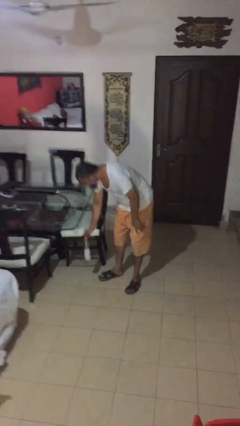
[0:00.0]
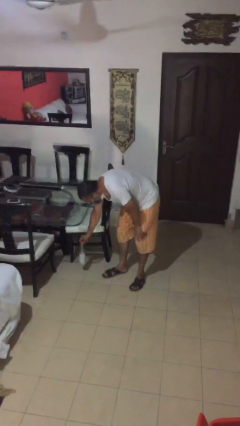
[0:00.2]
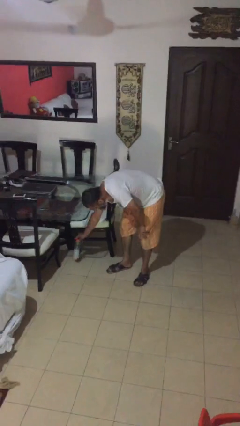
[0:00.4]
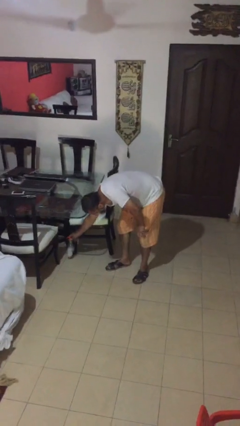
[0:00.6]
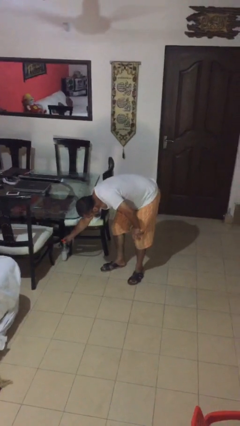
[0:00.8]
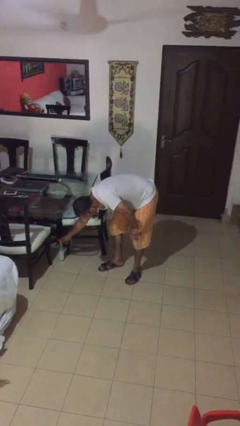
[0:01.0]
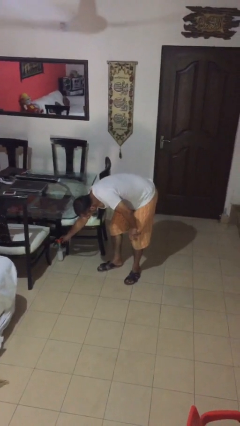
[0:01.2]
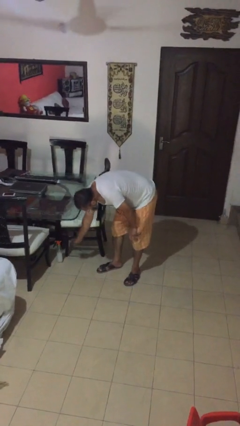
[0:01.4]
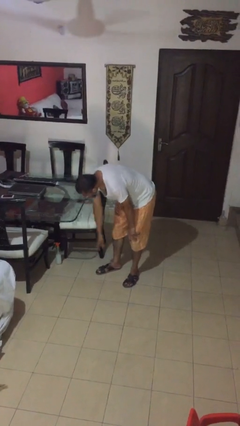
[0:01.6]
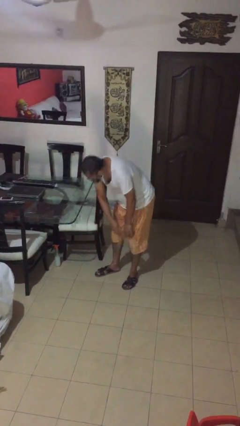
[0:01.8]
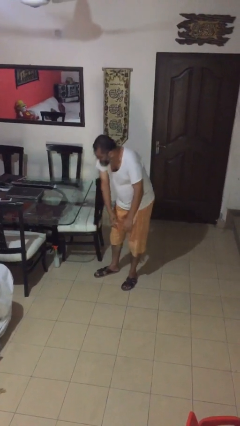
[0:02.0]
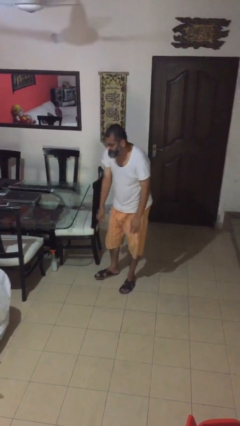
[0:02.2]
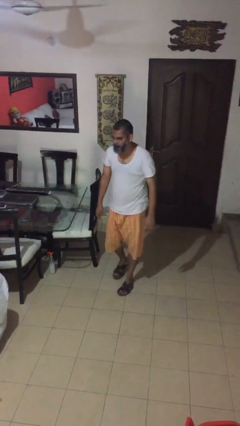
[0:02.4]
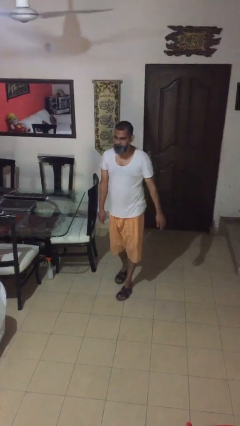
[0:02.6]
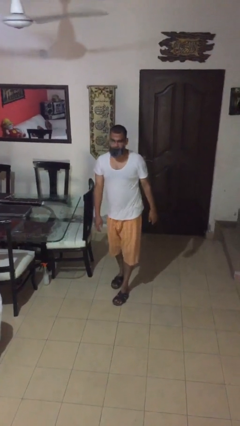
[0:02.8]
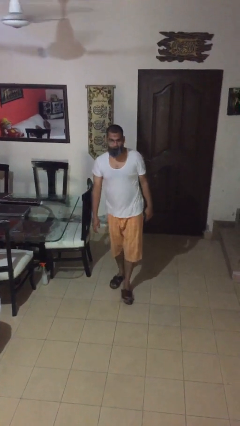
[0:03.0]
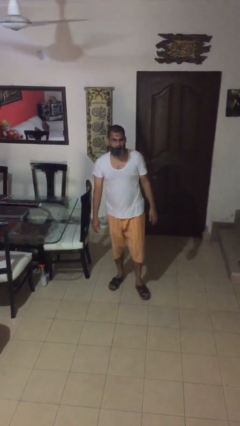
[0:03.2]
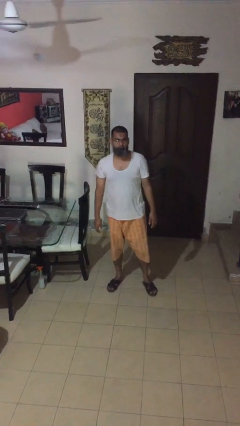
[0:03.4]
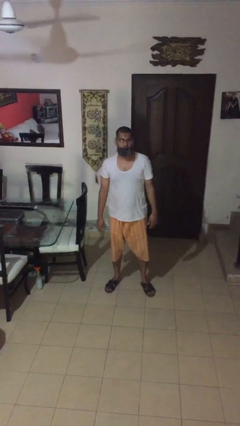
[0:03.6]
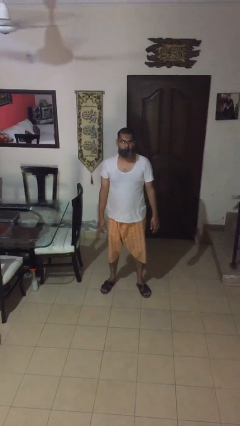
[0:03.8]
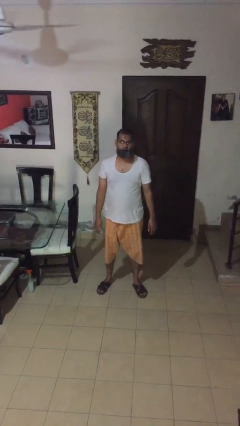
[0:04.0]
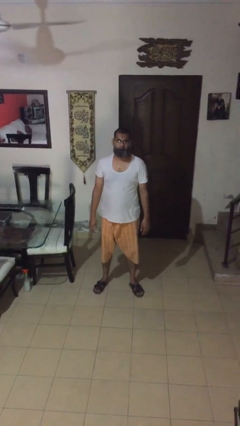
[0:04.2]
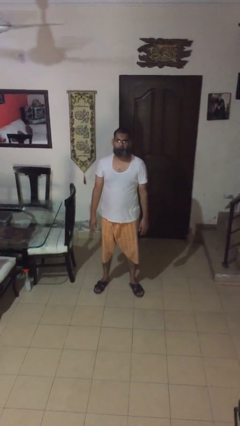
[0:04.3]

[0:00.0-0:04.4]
person puts down object on table

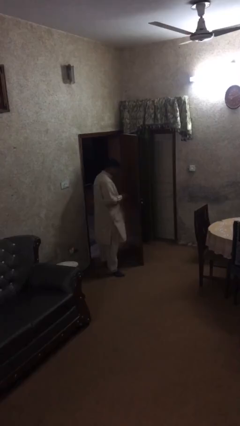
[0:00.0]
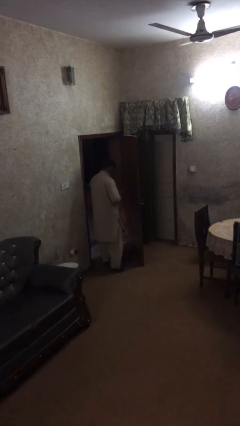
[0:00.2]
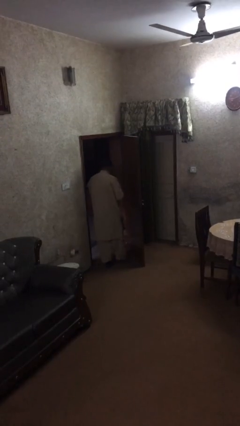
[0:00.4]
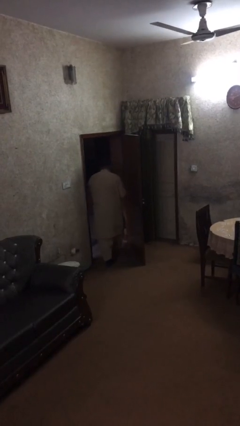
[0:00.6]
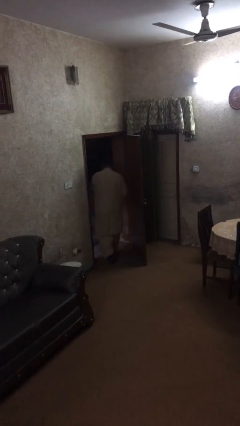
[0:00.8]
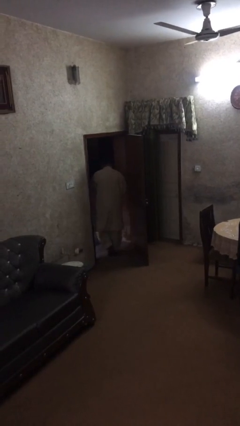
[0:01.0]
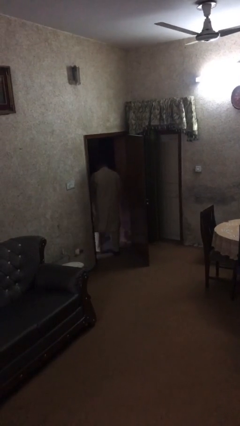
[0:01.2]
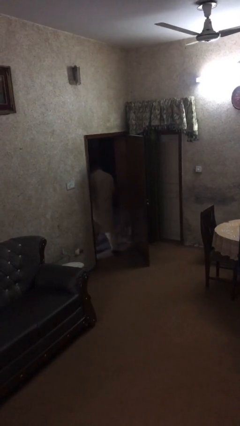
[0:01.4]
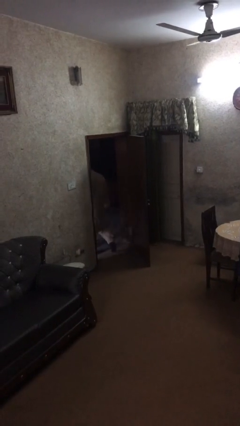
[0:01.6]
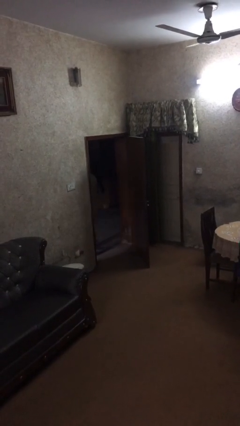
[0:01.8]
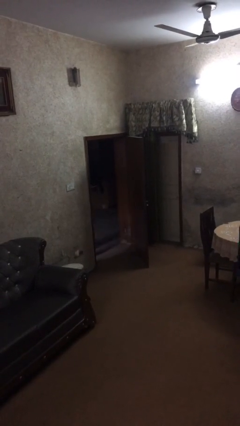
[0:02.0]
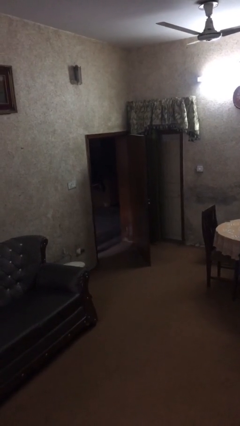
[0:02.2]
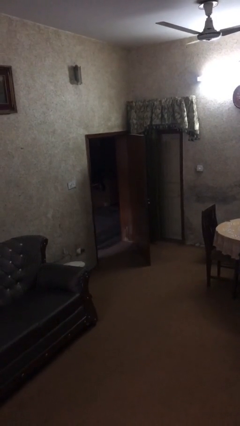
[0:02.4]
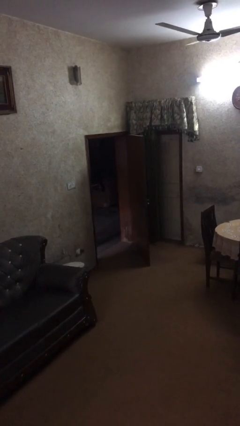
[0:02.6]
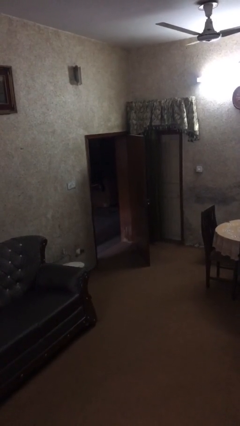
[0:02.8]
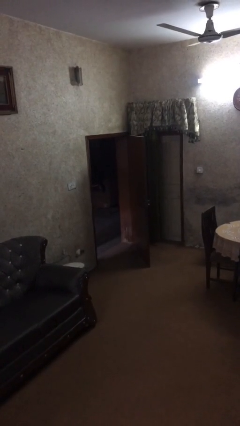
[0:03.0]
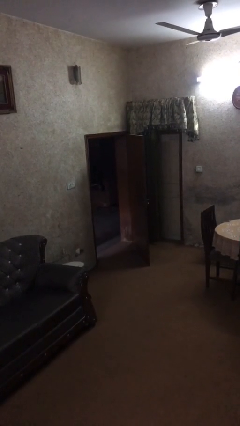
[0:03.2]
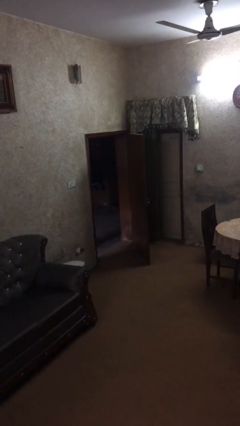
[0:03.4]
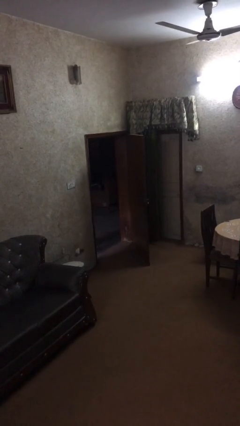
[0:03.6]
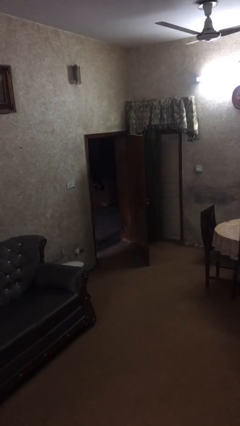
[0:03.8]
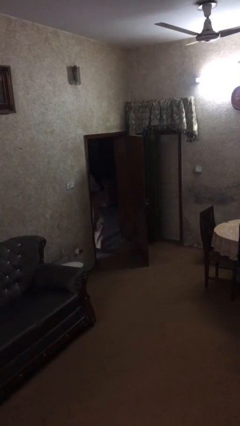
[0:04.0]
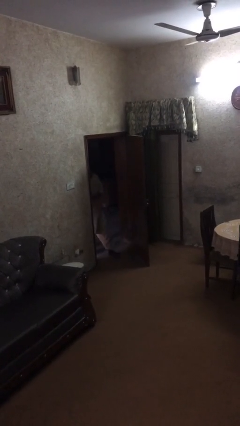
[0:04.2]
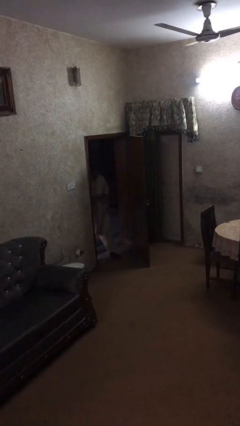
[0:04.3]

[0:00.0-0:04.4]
person exits scene through structure

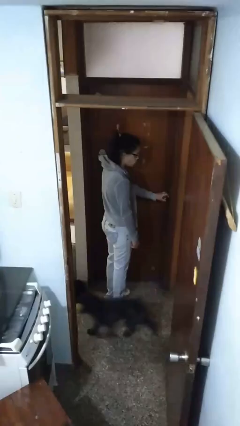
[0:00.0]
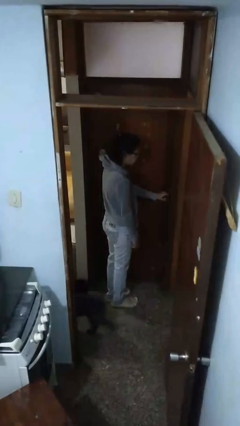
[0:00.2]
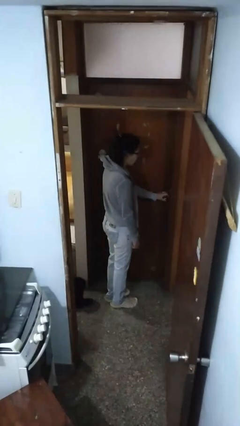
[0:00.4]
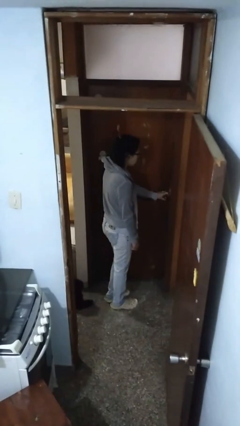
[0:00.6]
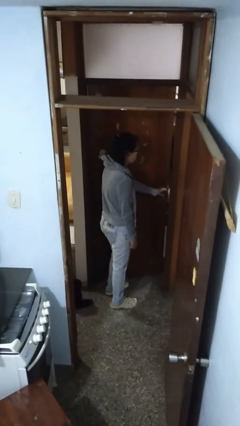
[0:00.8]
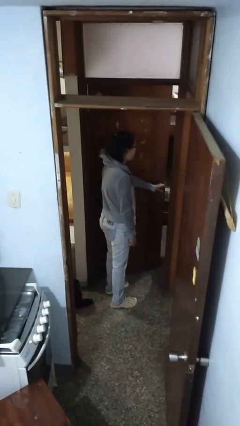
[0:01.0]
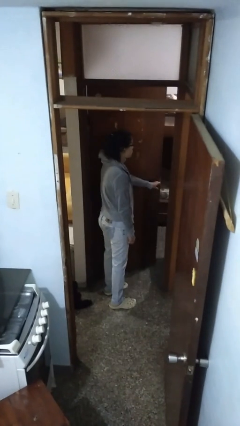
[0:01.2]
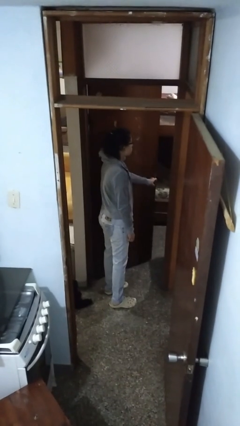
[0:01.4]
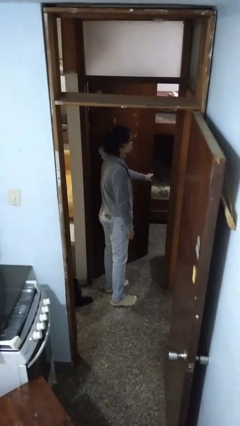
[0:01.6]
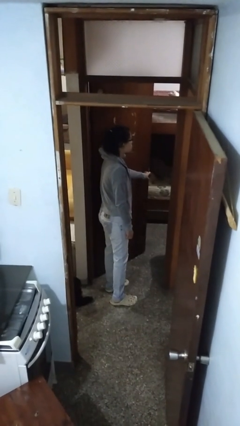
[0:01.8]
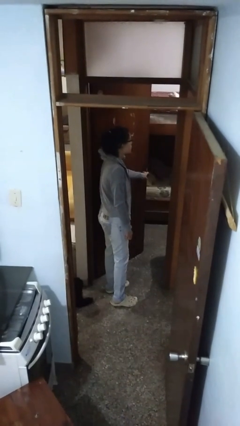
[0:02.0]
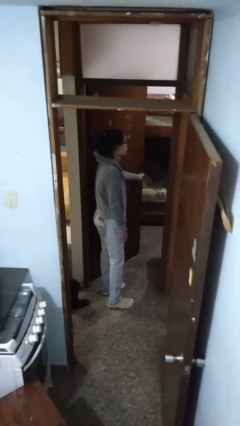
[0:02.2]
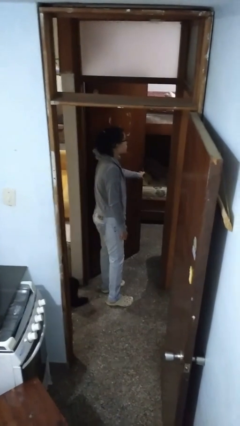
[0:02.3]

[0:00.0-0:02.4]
person opens facility door

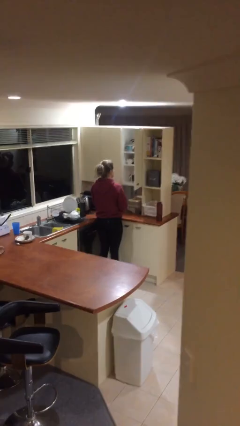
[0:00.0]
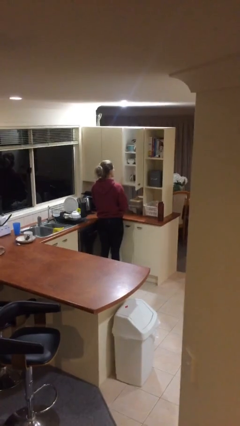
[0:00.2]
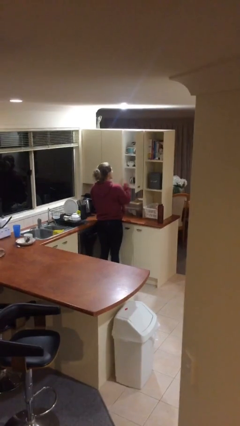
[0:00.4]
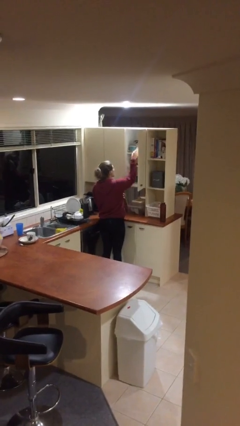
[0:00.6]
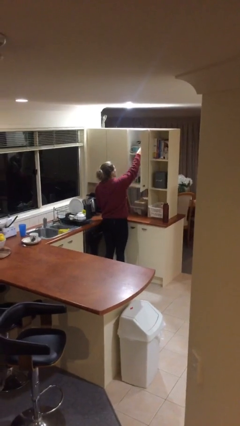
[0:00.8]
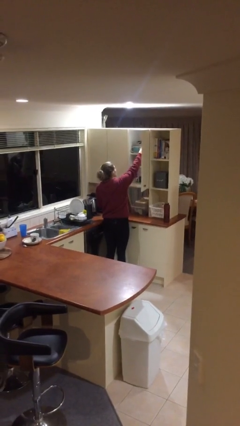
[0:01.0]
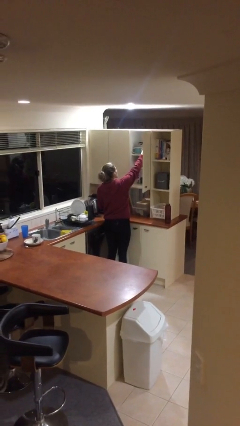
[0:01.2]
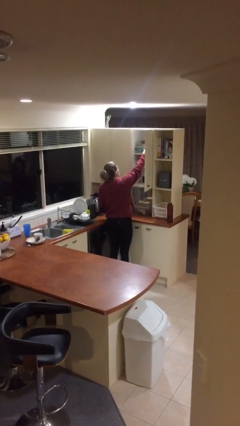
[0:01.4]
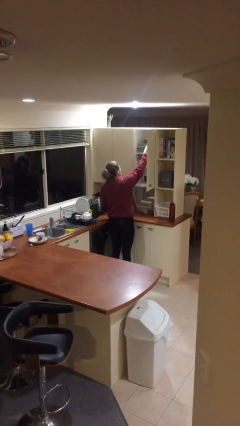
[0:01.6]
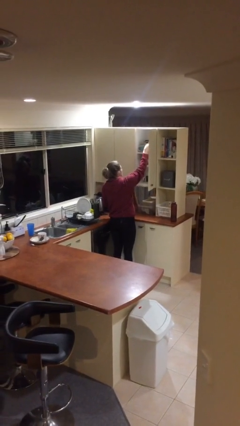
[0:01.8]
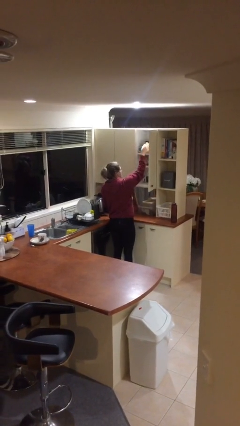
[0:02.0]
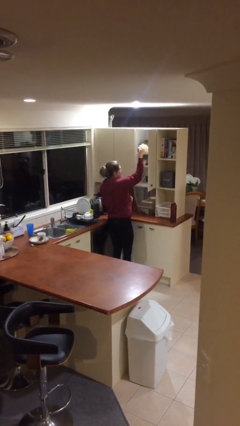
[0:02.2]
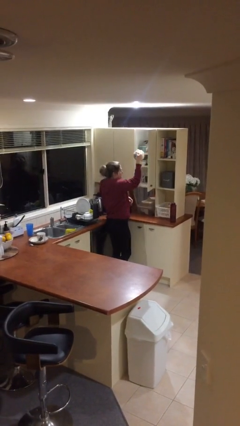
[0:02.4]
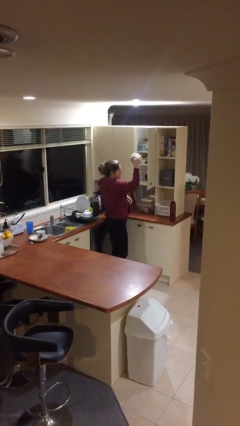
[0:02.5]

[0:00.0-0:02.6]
person picks up object from shelf

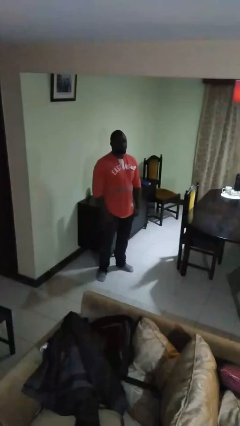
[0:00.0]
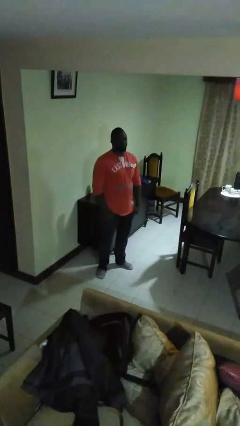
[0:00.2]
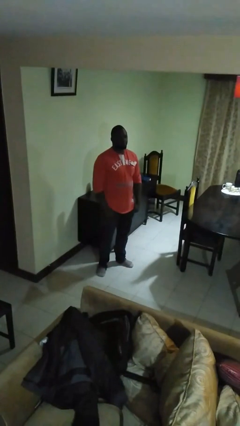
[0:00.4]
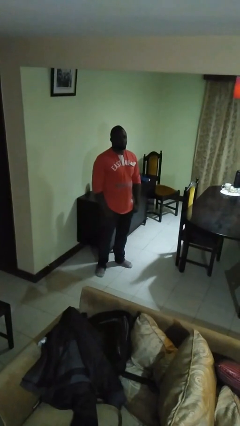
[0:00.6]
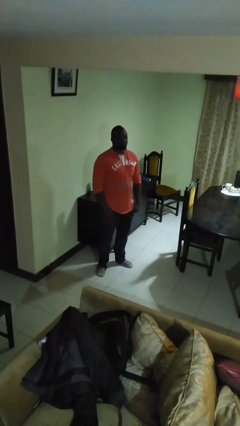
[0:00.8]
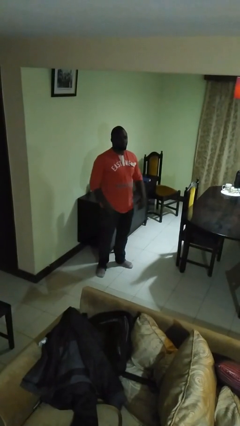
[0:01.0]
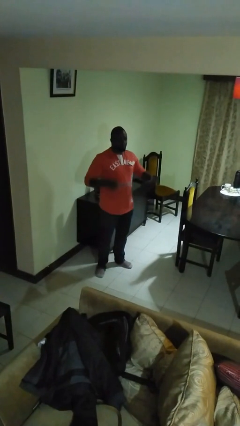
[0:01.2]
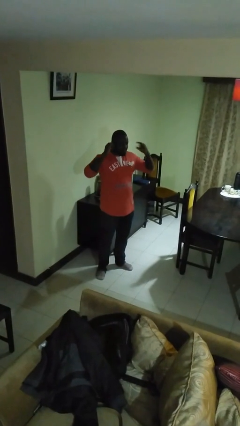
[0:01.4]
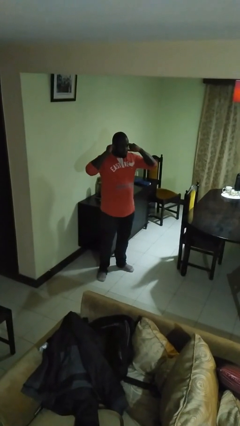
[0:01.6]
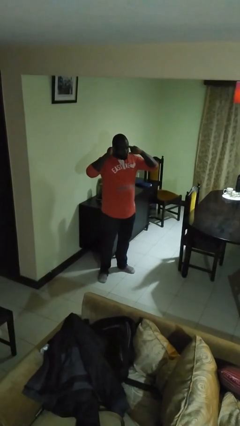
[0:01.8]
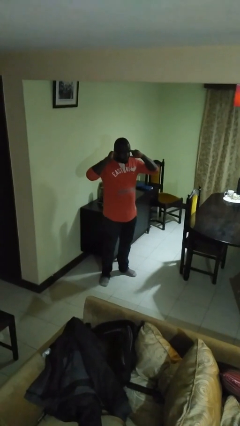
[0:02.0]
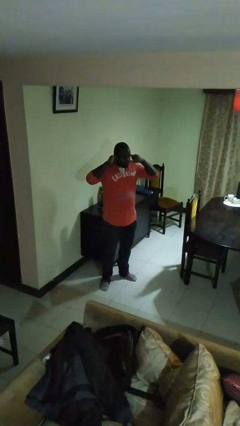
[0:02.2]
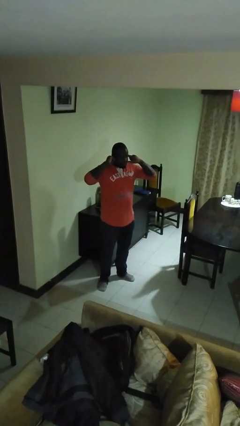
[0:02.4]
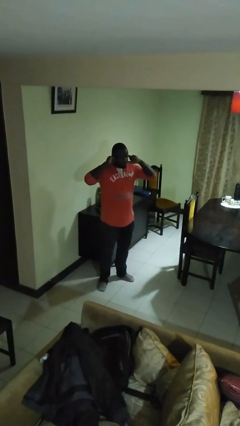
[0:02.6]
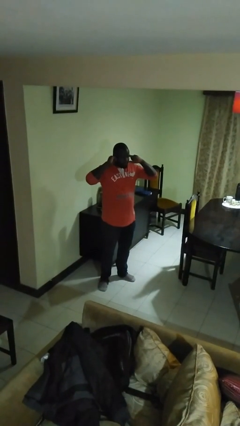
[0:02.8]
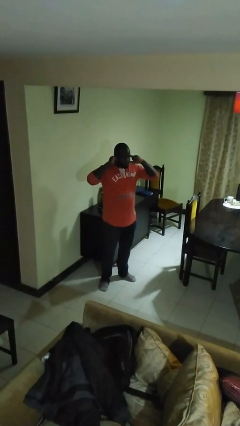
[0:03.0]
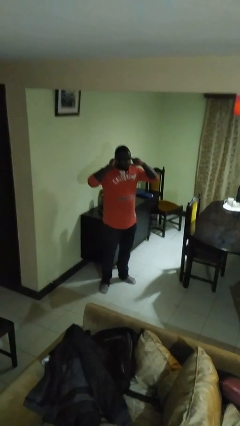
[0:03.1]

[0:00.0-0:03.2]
person puts fingers in ear

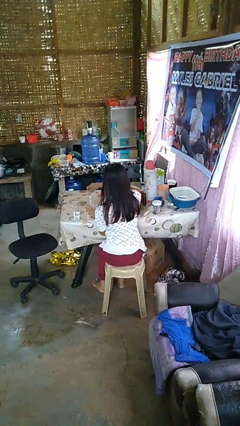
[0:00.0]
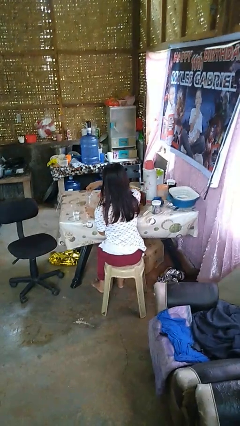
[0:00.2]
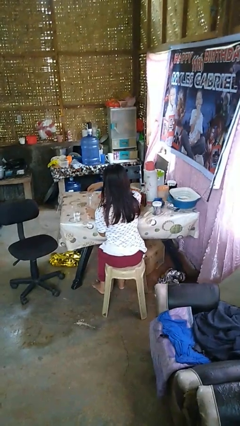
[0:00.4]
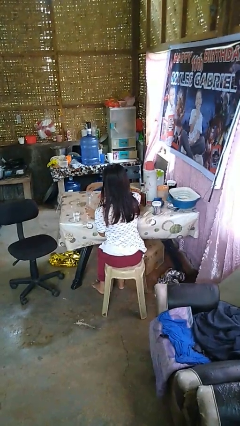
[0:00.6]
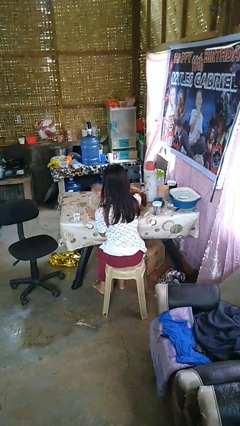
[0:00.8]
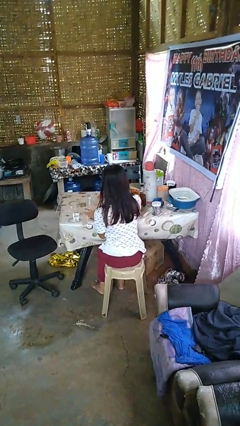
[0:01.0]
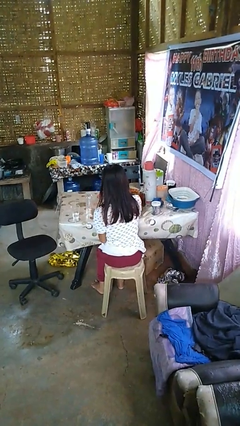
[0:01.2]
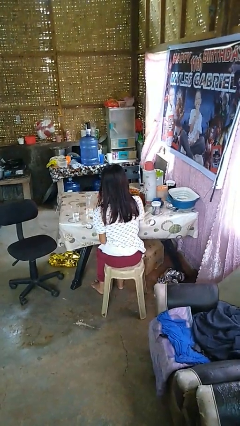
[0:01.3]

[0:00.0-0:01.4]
person unscrews lid from bottle
